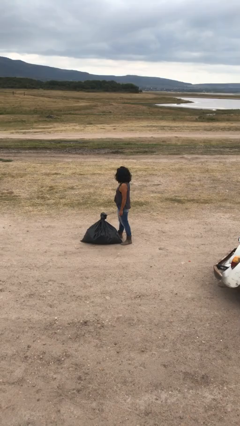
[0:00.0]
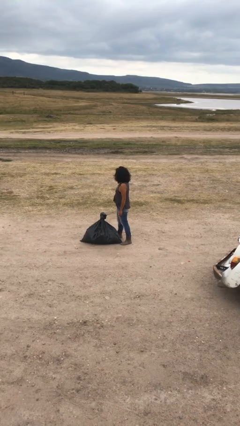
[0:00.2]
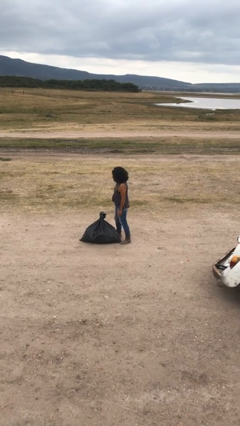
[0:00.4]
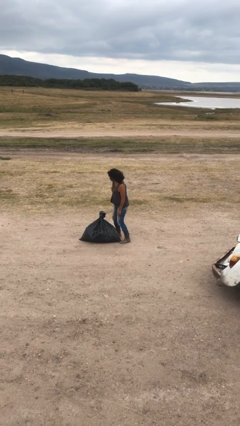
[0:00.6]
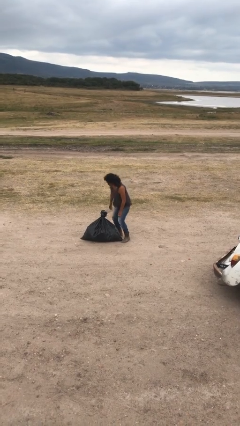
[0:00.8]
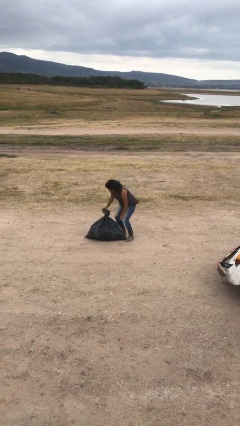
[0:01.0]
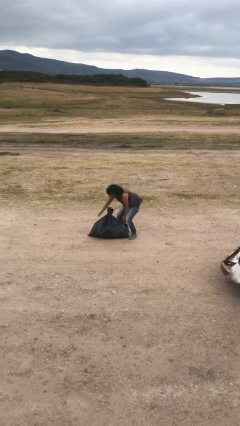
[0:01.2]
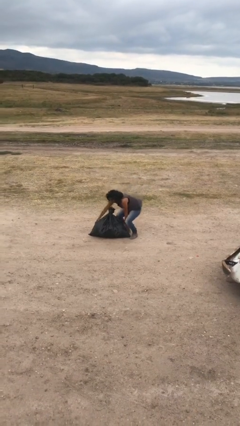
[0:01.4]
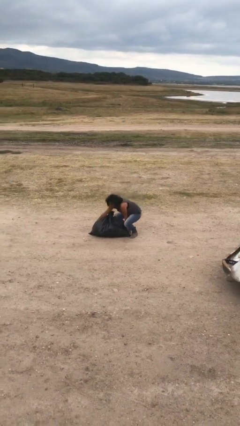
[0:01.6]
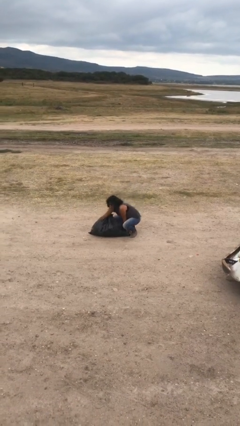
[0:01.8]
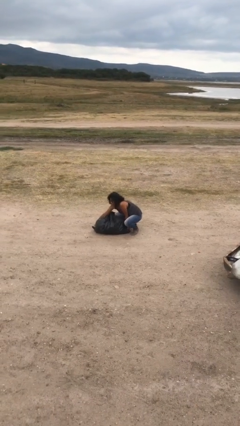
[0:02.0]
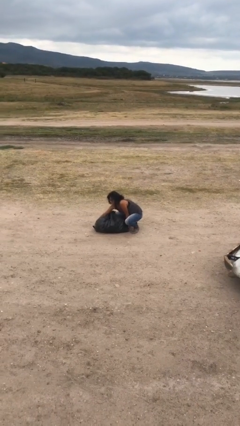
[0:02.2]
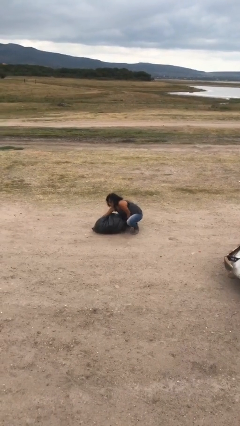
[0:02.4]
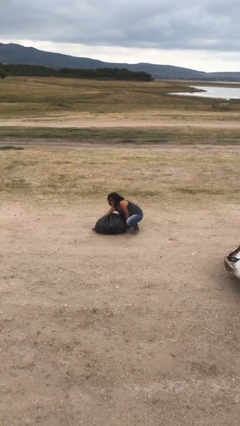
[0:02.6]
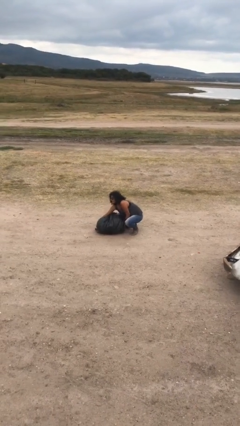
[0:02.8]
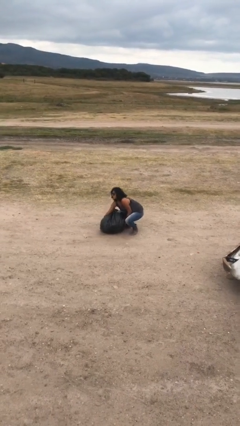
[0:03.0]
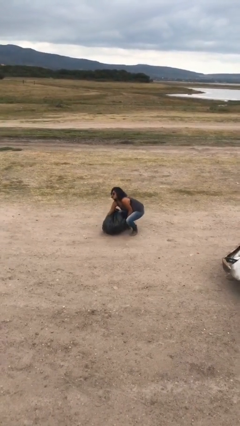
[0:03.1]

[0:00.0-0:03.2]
person picks up object from floor

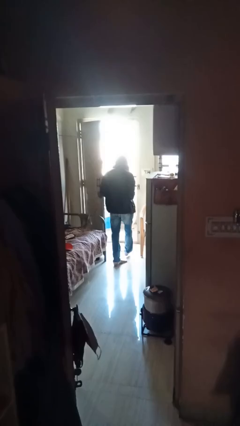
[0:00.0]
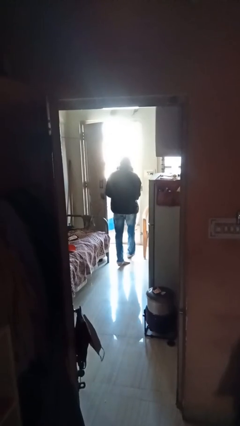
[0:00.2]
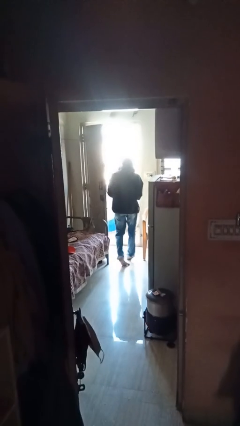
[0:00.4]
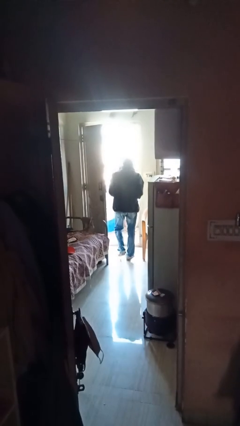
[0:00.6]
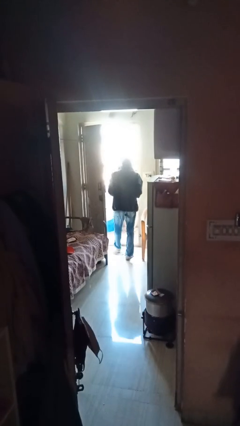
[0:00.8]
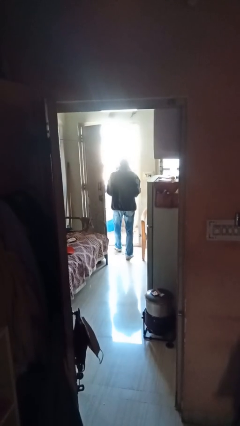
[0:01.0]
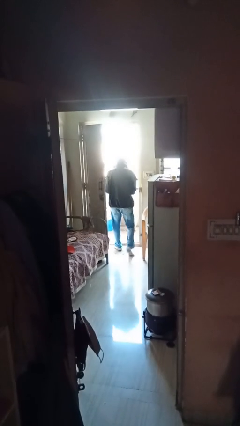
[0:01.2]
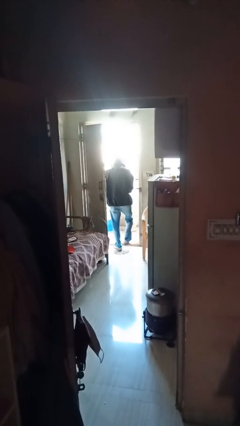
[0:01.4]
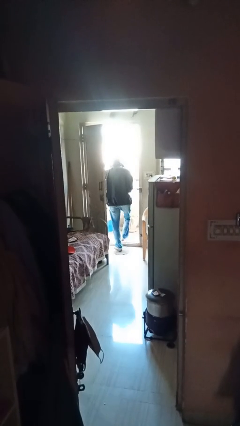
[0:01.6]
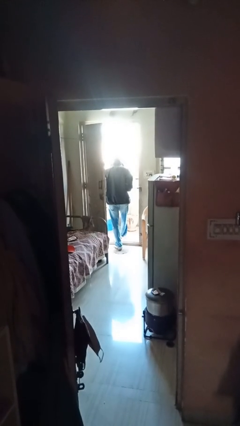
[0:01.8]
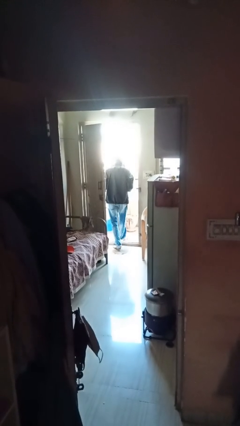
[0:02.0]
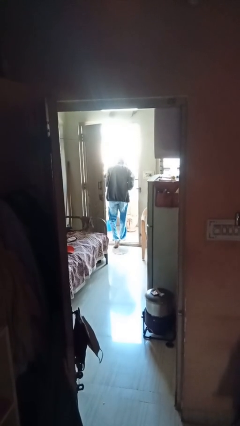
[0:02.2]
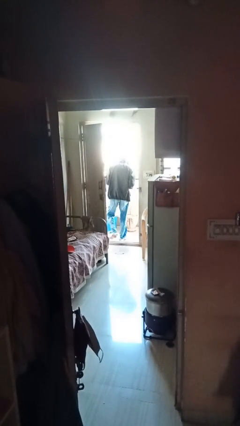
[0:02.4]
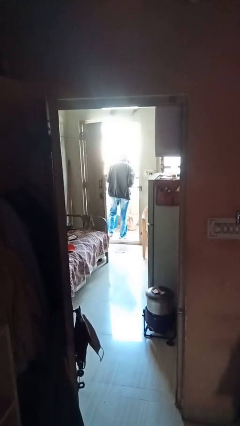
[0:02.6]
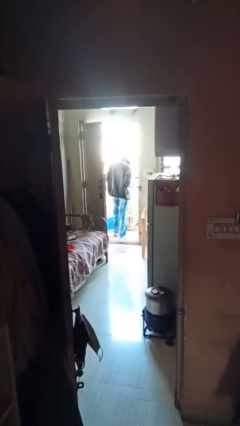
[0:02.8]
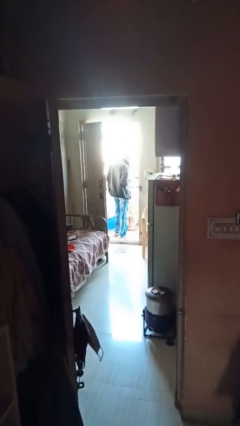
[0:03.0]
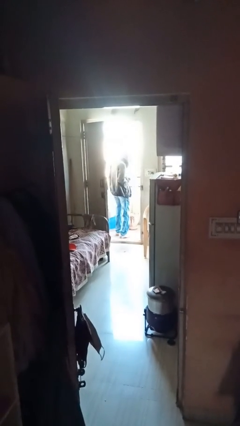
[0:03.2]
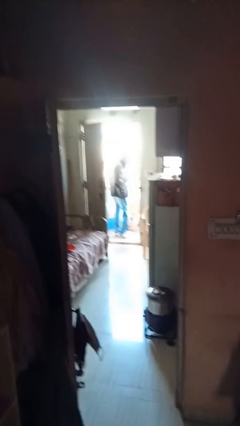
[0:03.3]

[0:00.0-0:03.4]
person exits scene through structure

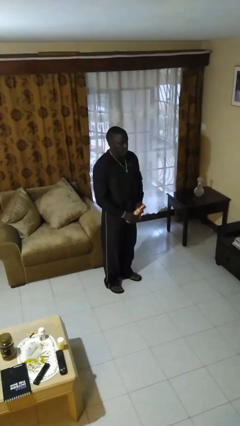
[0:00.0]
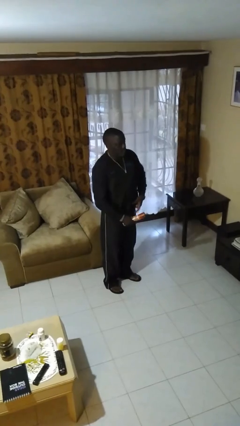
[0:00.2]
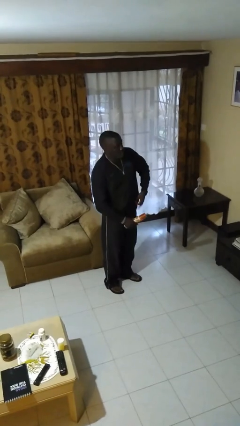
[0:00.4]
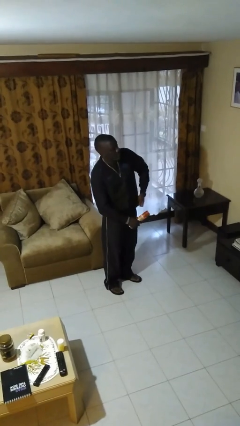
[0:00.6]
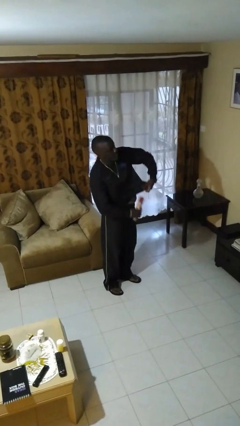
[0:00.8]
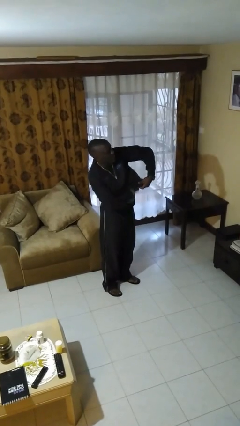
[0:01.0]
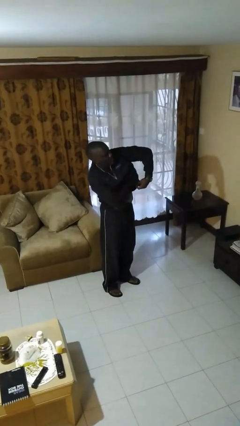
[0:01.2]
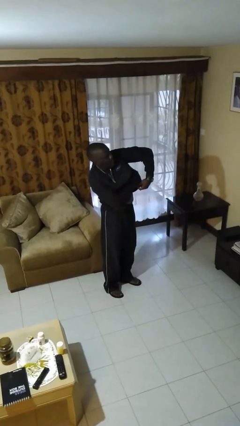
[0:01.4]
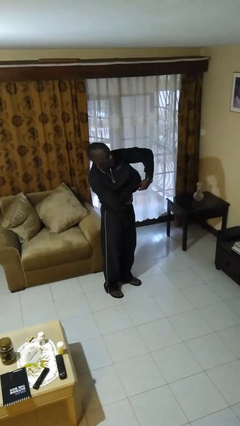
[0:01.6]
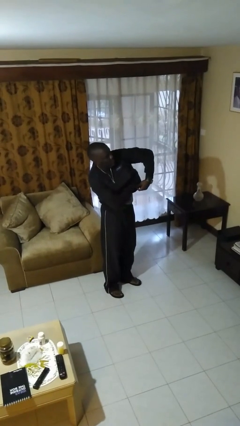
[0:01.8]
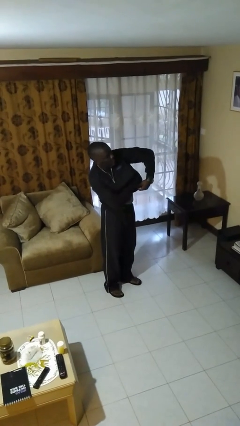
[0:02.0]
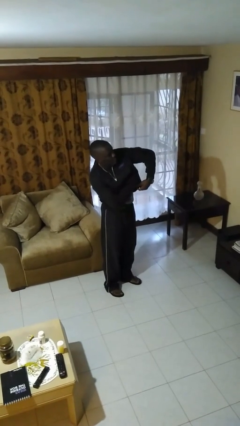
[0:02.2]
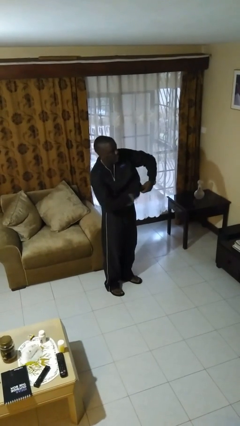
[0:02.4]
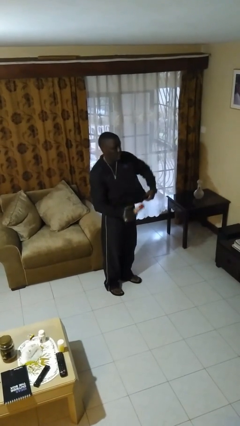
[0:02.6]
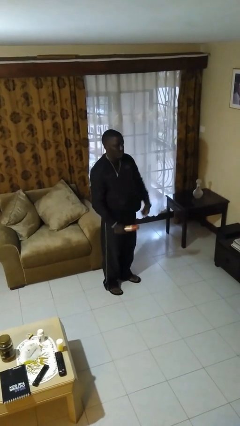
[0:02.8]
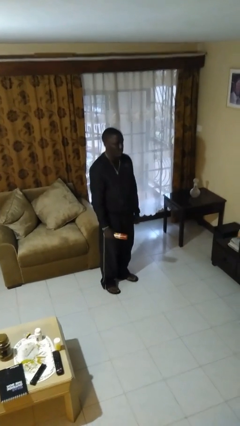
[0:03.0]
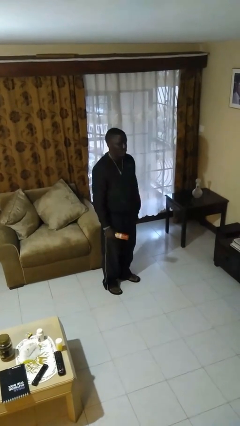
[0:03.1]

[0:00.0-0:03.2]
person applies deodorant

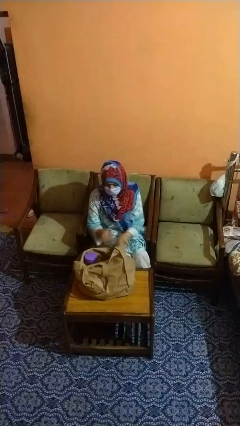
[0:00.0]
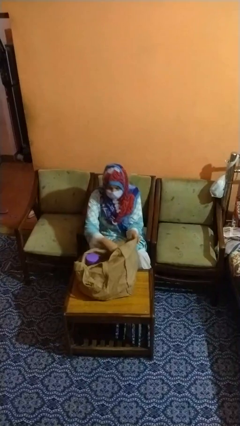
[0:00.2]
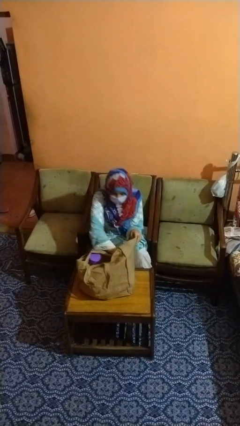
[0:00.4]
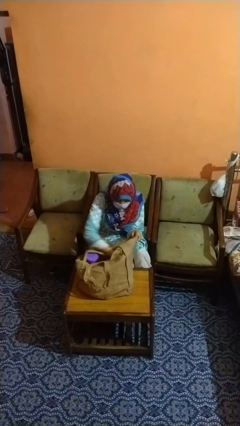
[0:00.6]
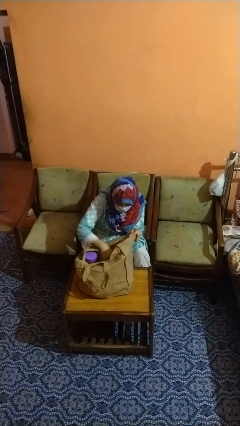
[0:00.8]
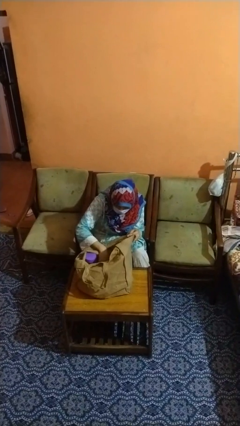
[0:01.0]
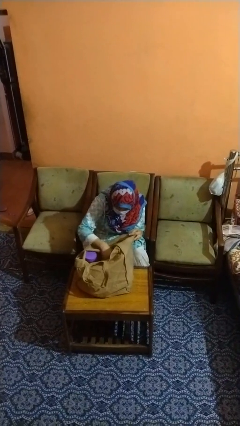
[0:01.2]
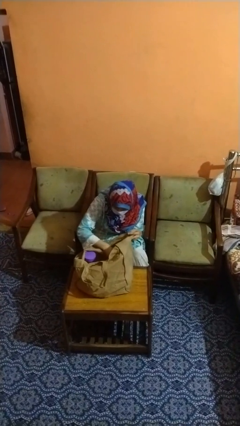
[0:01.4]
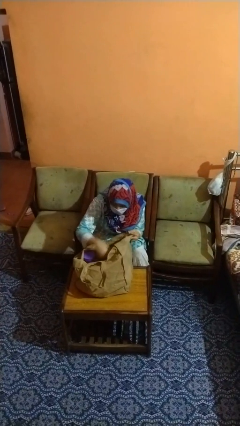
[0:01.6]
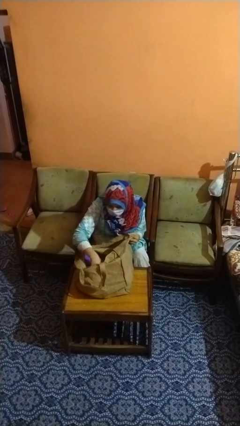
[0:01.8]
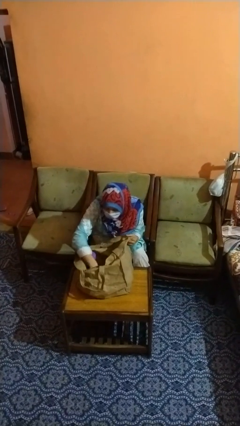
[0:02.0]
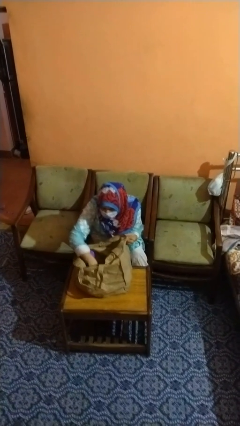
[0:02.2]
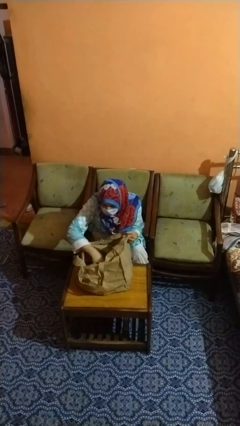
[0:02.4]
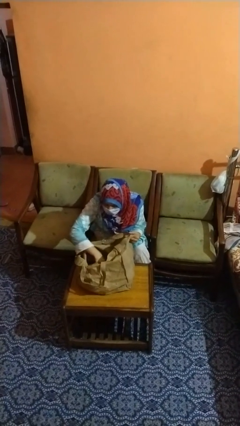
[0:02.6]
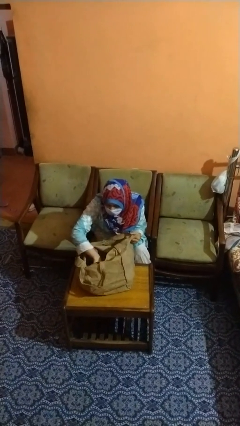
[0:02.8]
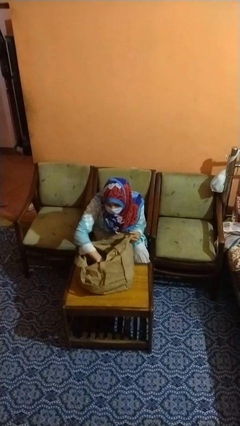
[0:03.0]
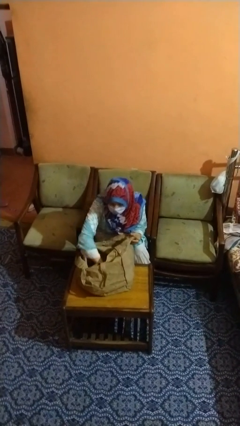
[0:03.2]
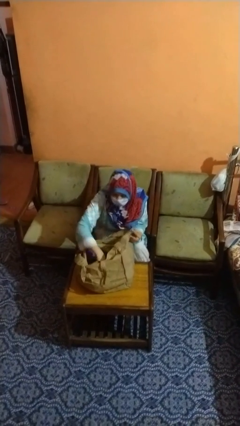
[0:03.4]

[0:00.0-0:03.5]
person searches in bag

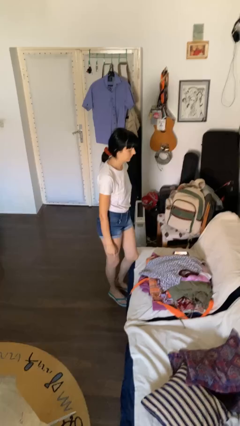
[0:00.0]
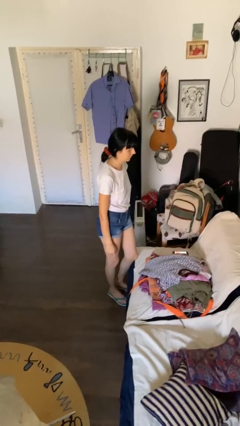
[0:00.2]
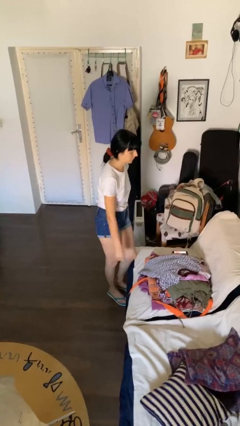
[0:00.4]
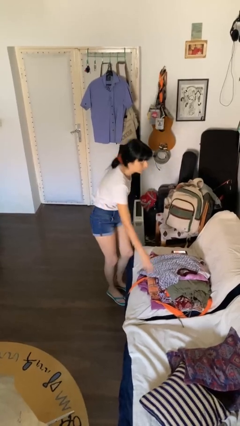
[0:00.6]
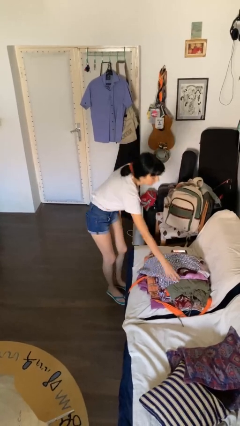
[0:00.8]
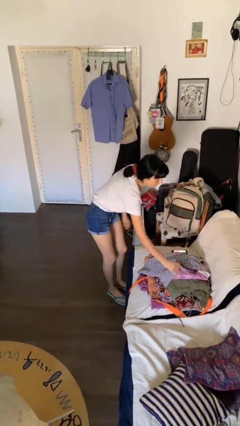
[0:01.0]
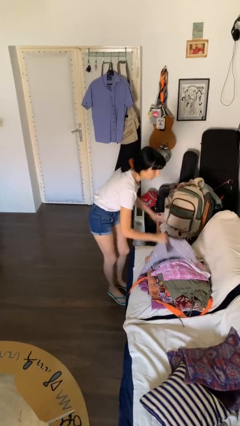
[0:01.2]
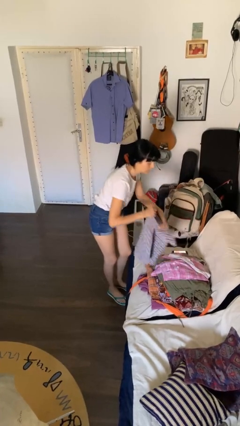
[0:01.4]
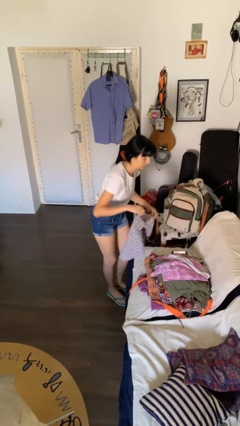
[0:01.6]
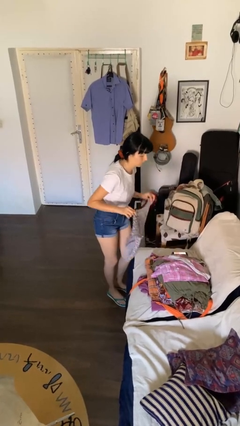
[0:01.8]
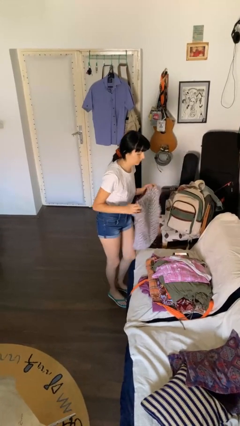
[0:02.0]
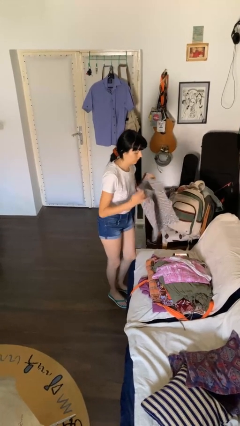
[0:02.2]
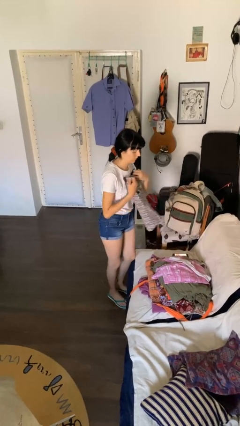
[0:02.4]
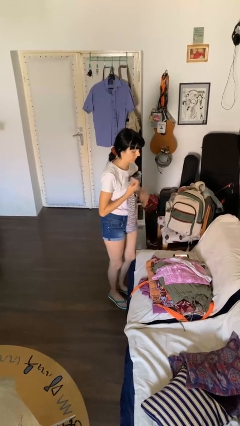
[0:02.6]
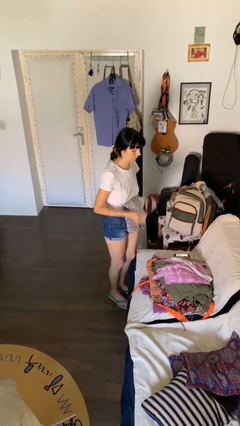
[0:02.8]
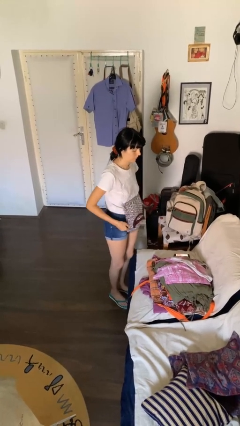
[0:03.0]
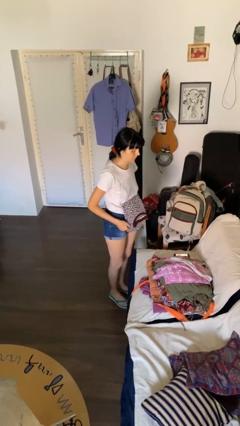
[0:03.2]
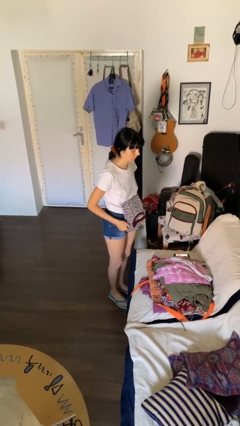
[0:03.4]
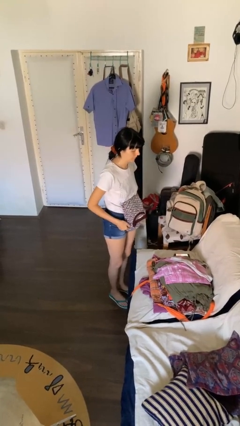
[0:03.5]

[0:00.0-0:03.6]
person folds shirt

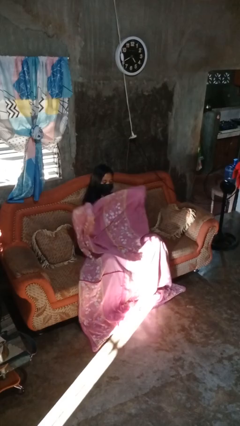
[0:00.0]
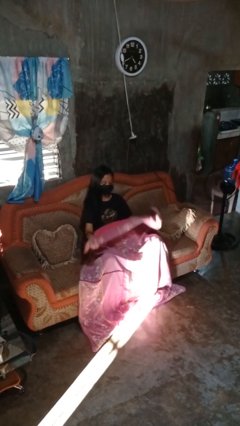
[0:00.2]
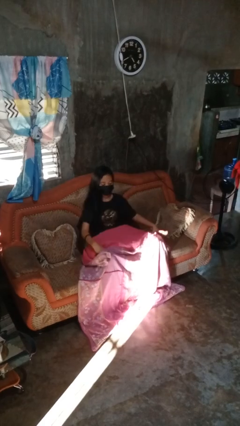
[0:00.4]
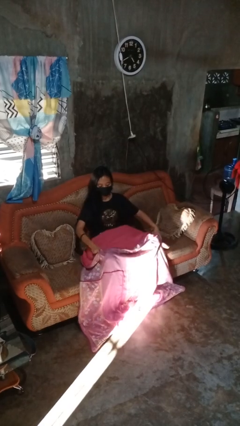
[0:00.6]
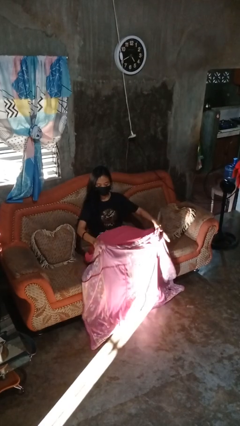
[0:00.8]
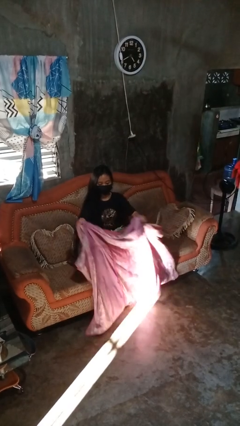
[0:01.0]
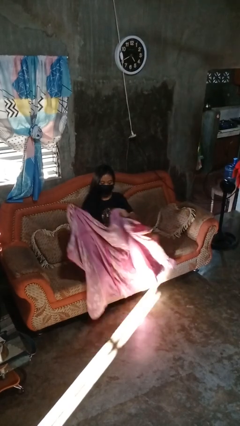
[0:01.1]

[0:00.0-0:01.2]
person uncovers with blanket
